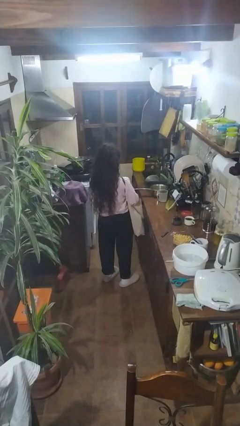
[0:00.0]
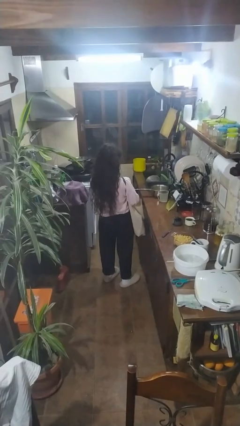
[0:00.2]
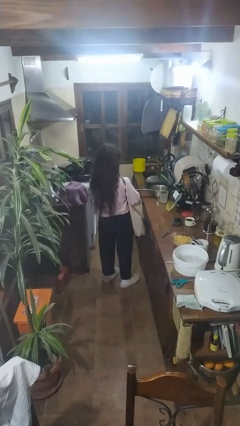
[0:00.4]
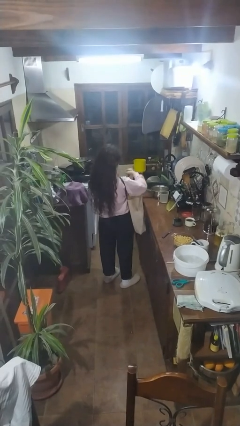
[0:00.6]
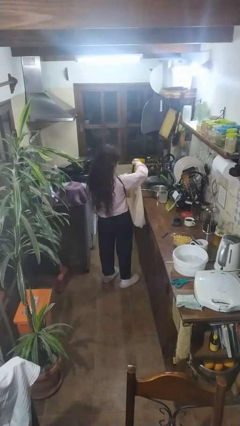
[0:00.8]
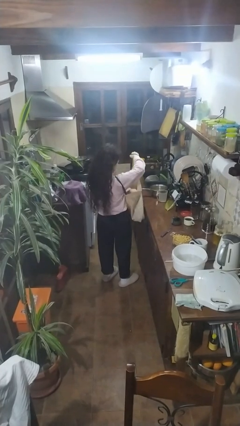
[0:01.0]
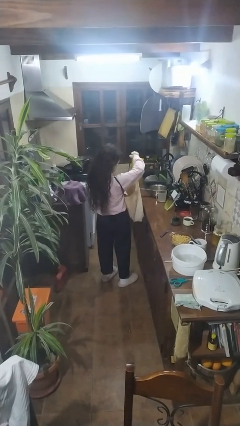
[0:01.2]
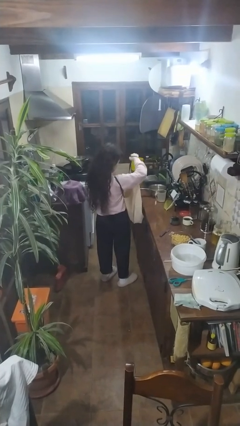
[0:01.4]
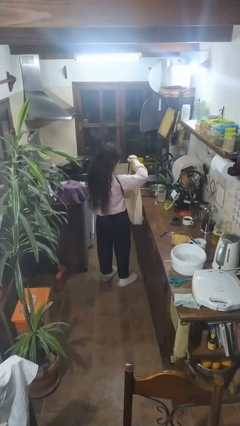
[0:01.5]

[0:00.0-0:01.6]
person puts object into bag

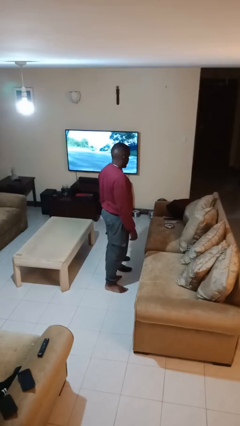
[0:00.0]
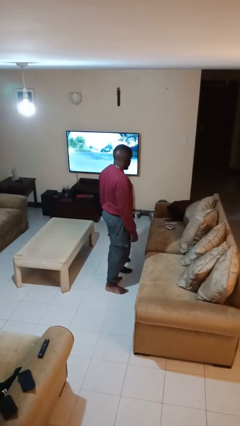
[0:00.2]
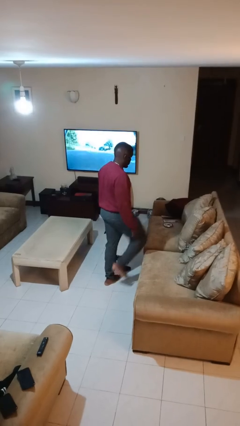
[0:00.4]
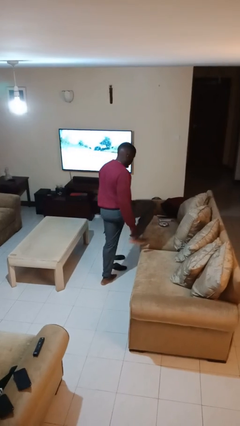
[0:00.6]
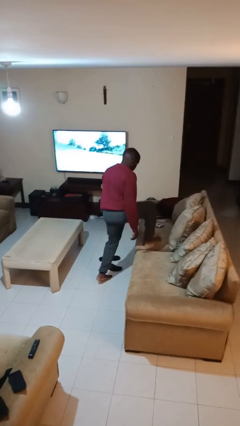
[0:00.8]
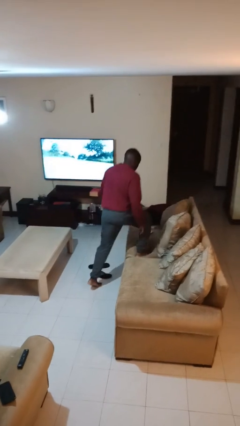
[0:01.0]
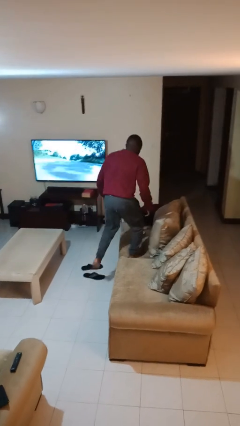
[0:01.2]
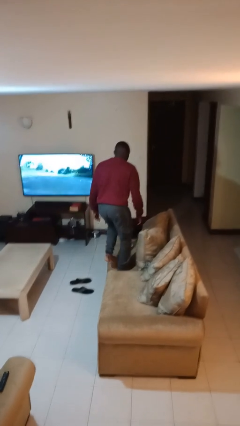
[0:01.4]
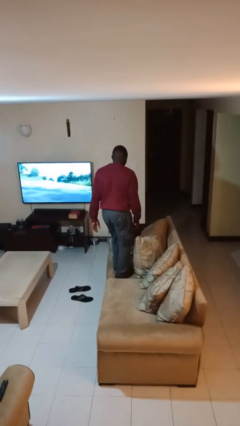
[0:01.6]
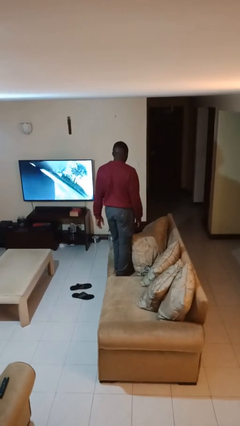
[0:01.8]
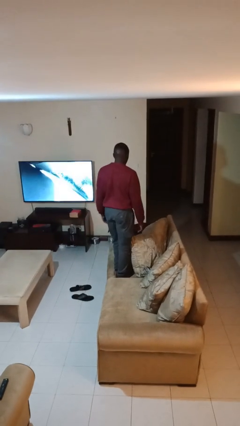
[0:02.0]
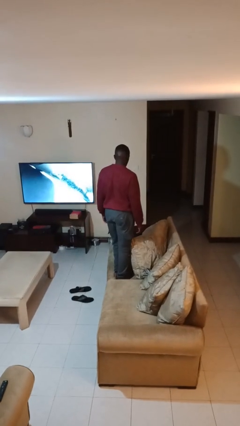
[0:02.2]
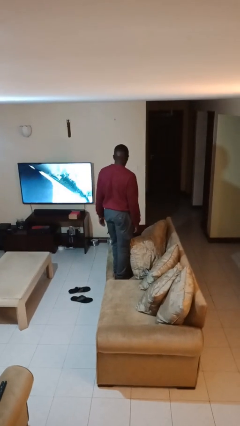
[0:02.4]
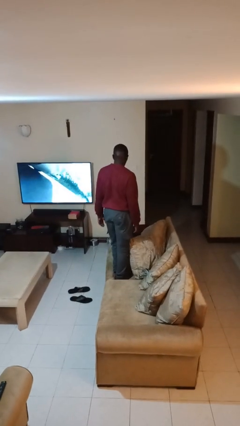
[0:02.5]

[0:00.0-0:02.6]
person climbs on couch

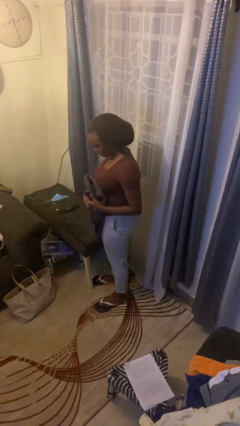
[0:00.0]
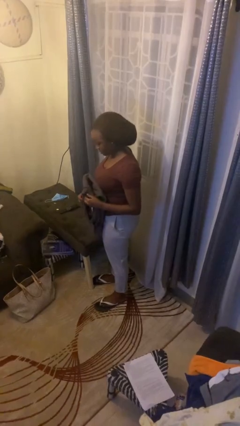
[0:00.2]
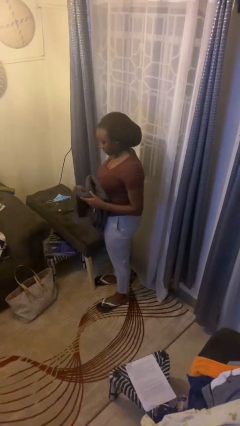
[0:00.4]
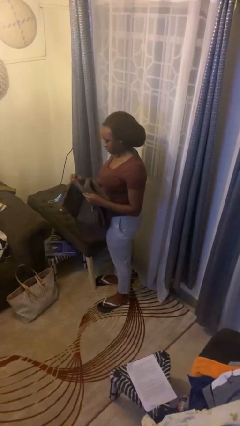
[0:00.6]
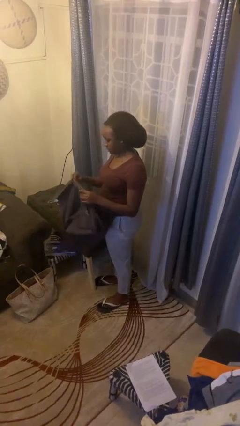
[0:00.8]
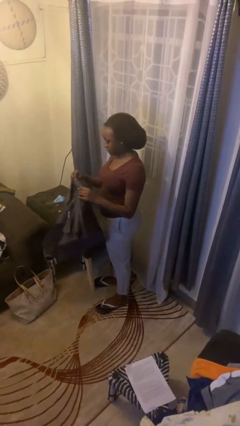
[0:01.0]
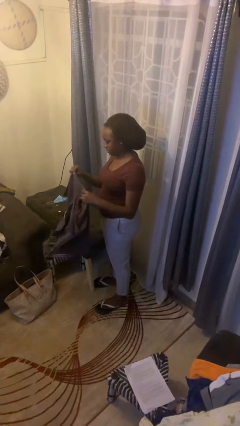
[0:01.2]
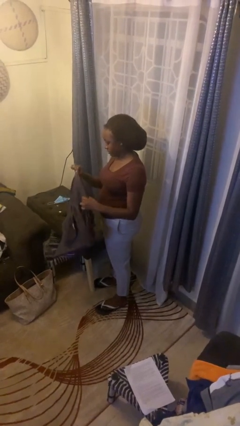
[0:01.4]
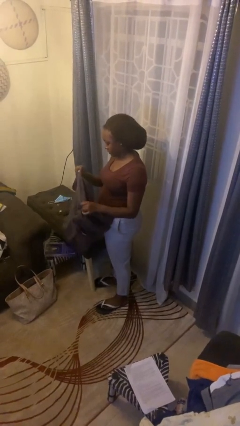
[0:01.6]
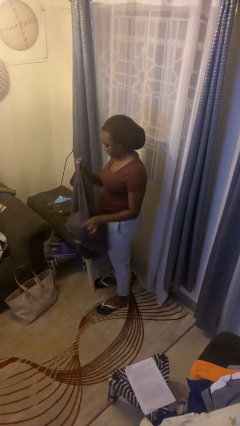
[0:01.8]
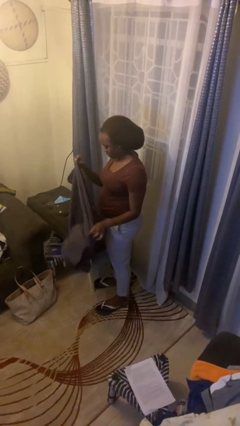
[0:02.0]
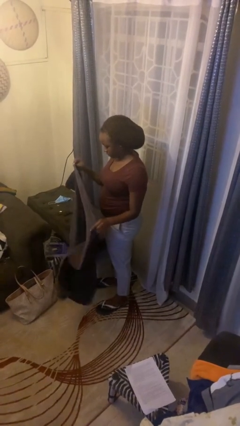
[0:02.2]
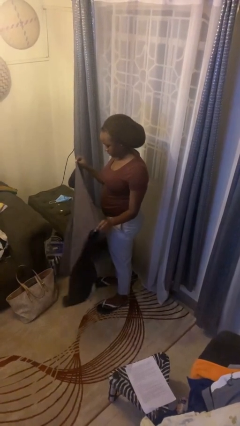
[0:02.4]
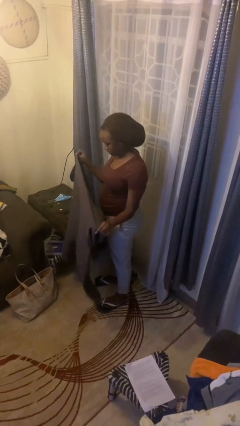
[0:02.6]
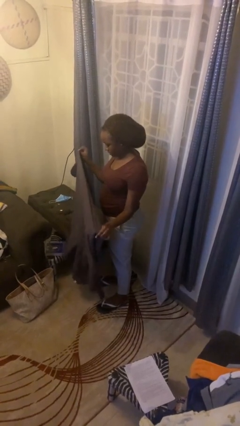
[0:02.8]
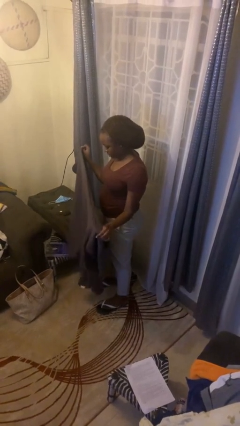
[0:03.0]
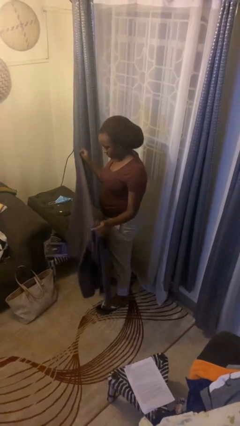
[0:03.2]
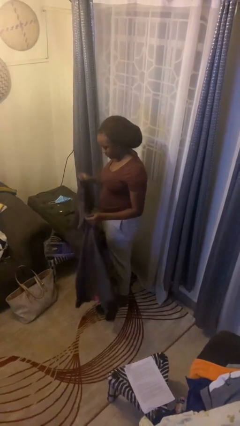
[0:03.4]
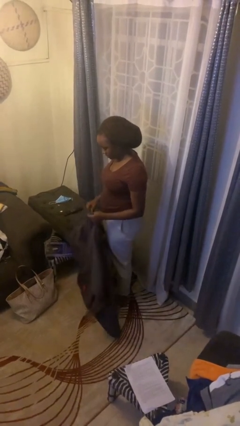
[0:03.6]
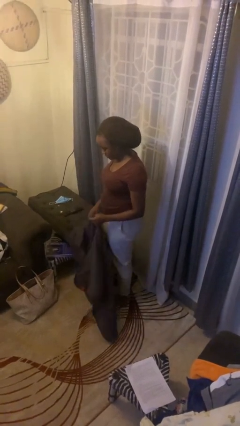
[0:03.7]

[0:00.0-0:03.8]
person unfolds blanket

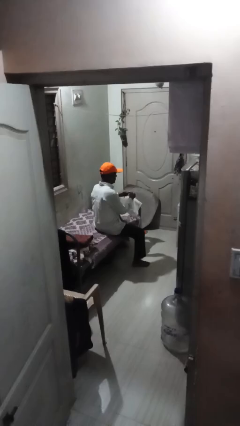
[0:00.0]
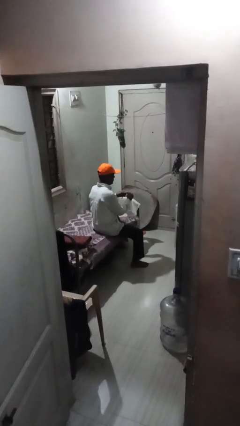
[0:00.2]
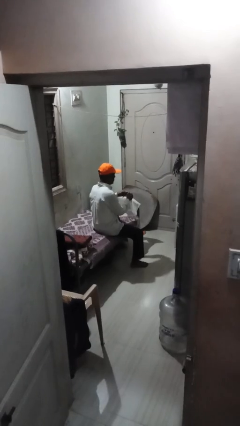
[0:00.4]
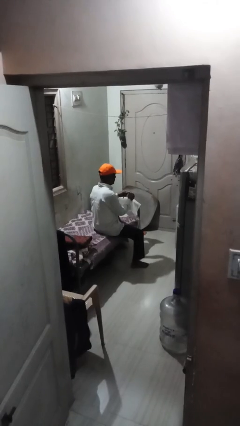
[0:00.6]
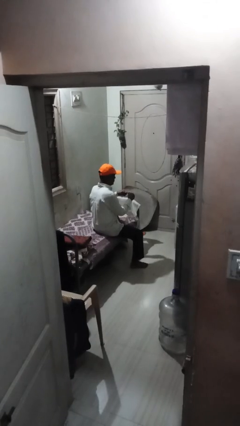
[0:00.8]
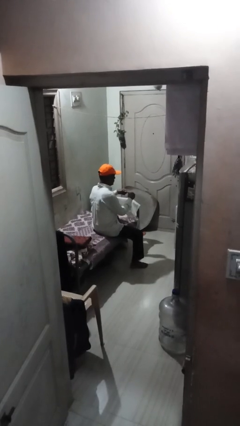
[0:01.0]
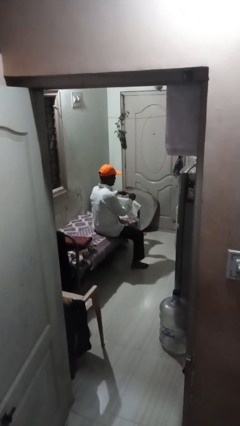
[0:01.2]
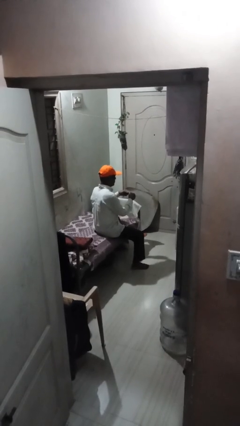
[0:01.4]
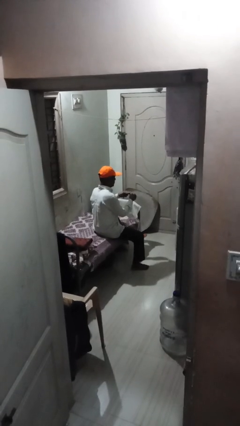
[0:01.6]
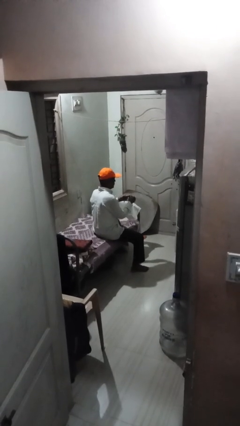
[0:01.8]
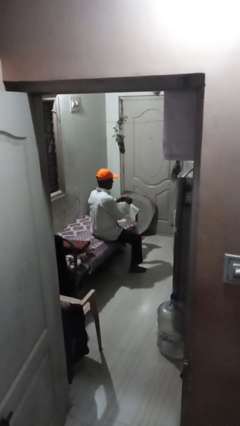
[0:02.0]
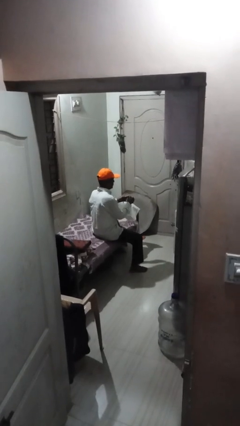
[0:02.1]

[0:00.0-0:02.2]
person files fingernails

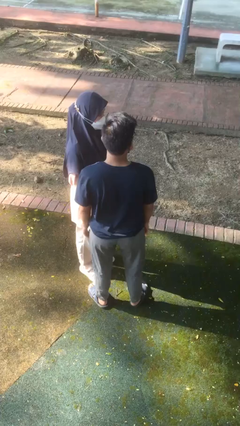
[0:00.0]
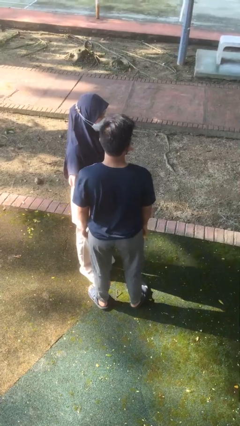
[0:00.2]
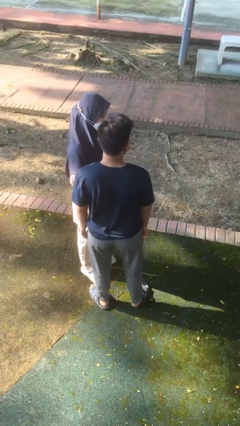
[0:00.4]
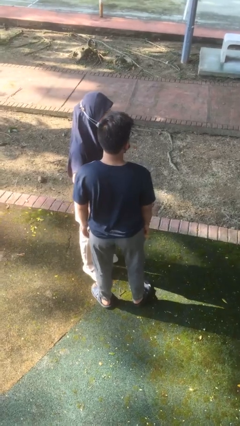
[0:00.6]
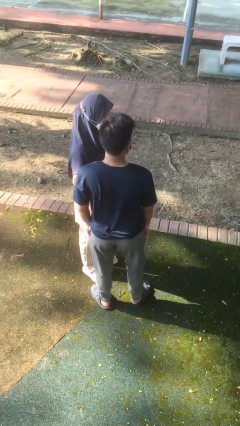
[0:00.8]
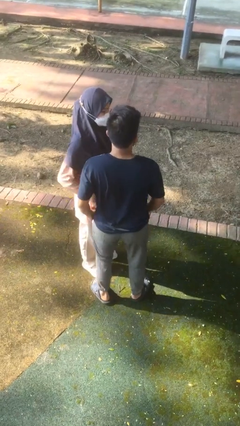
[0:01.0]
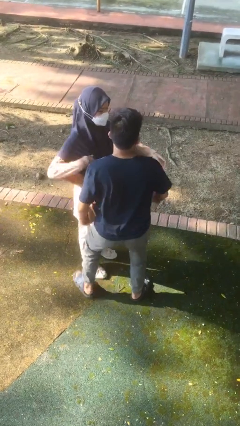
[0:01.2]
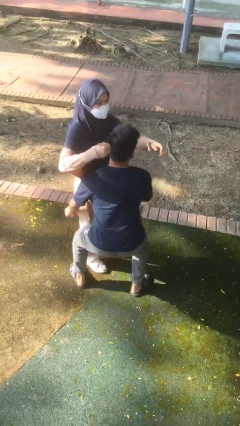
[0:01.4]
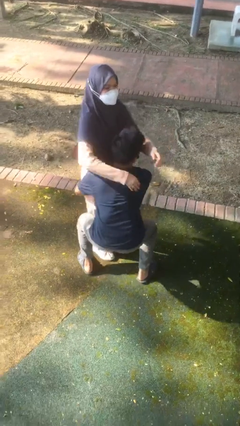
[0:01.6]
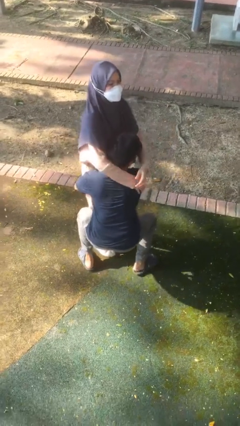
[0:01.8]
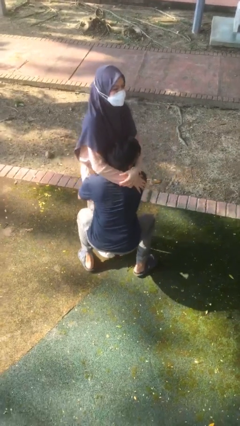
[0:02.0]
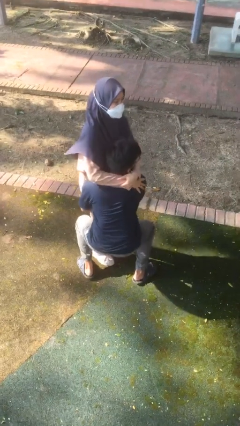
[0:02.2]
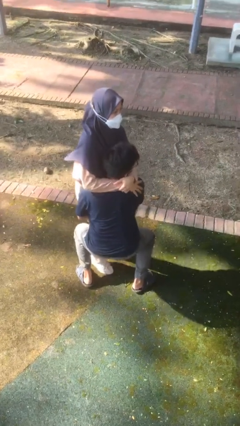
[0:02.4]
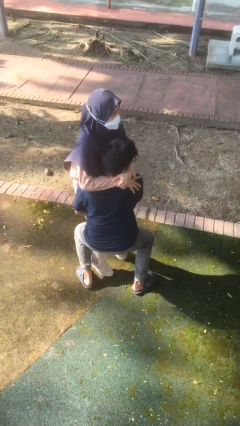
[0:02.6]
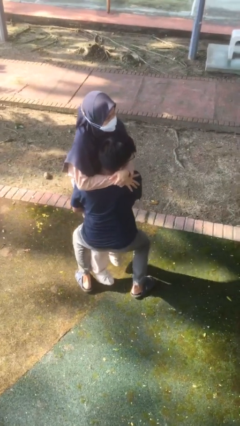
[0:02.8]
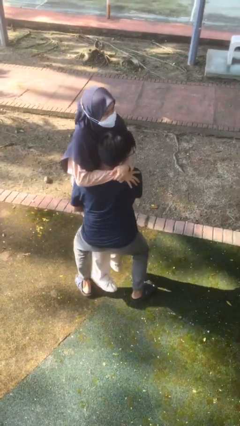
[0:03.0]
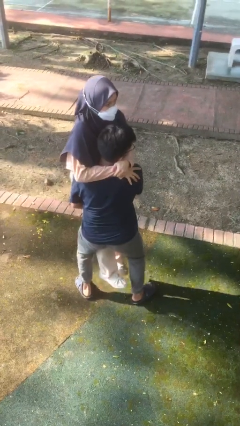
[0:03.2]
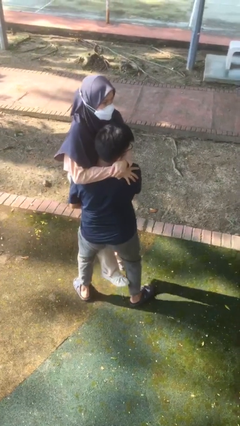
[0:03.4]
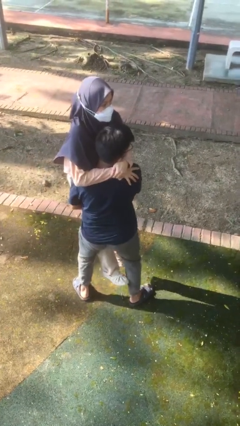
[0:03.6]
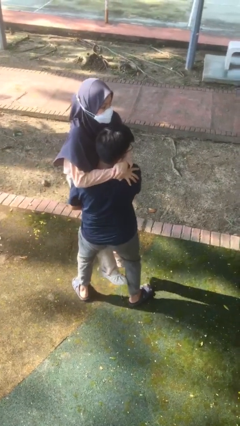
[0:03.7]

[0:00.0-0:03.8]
person picks up person

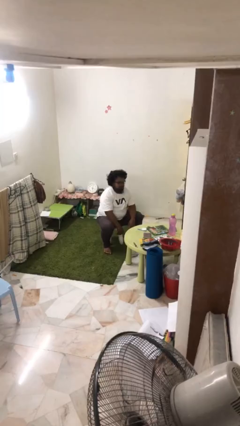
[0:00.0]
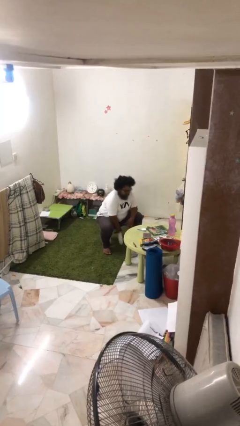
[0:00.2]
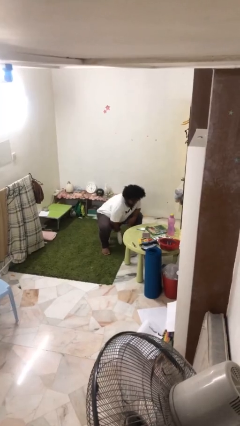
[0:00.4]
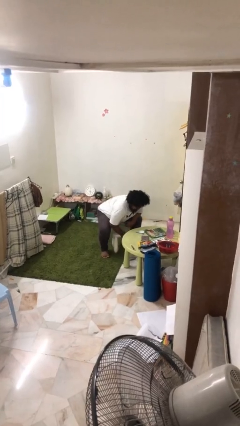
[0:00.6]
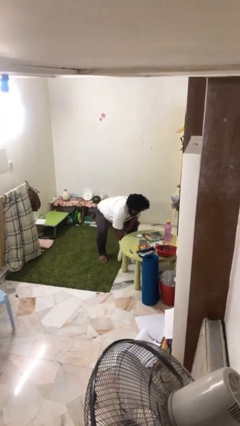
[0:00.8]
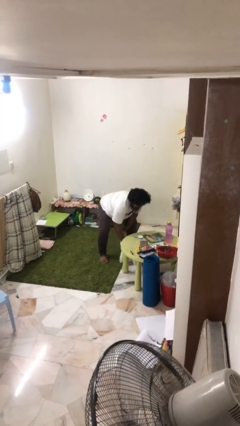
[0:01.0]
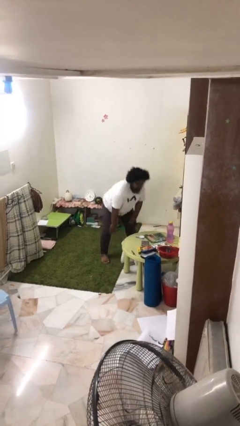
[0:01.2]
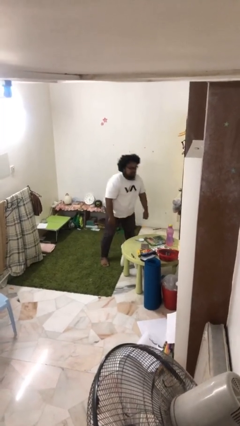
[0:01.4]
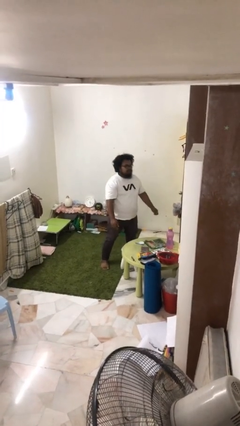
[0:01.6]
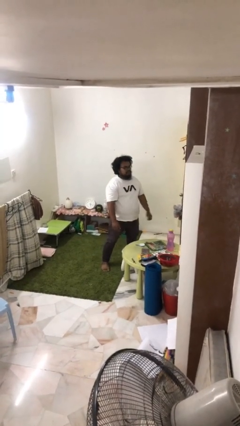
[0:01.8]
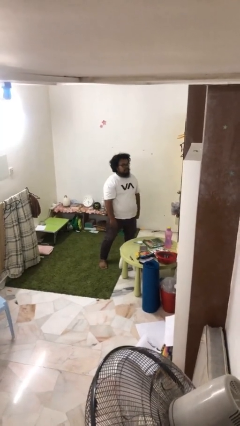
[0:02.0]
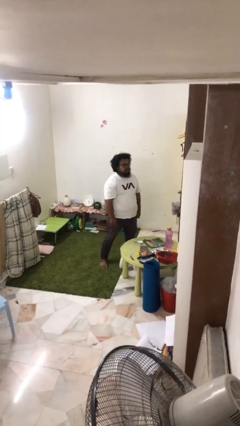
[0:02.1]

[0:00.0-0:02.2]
person stands up

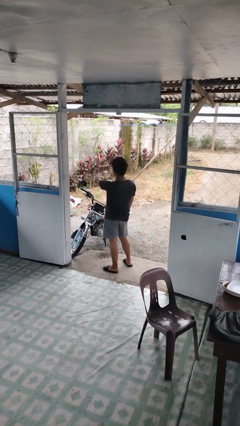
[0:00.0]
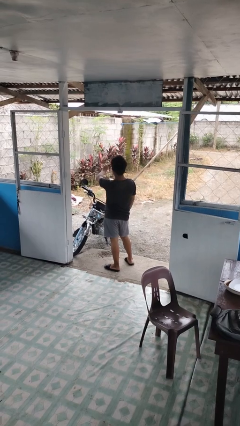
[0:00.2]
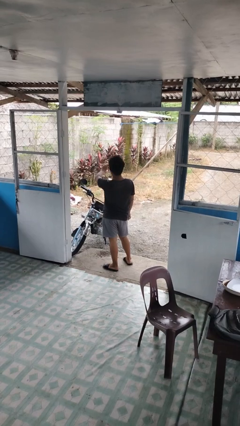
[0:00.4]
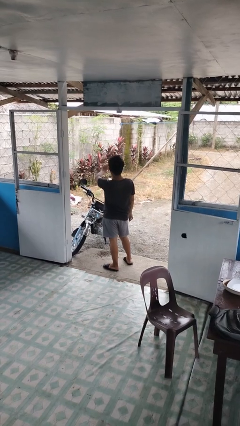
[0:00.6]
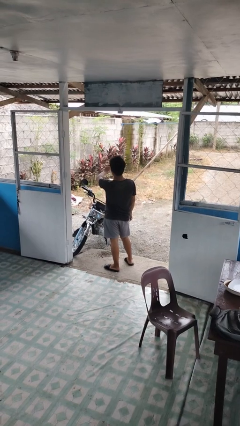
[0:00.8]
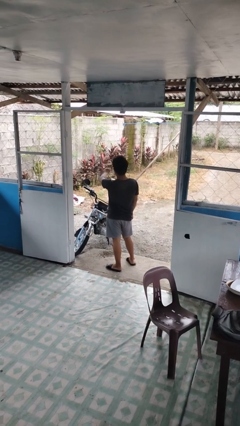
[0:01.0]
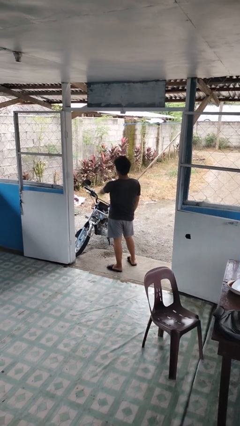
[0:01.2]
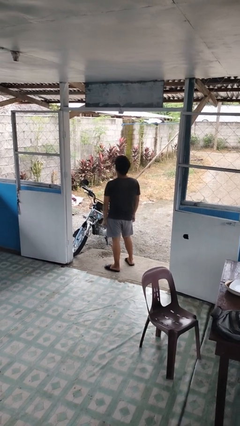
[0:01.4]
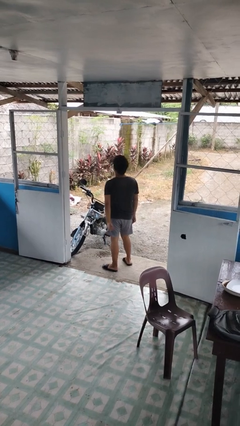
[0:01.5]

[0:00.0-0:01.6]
person gestures thumbs down
